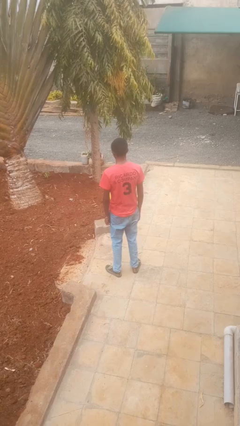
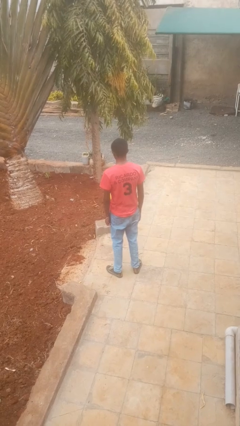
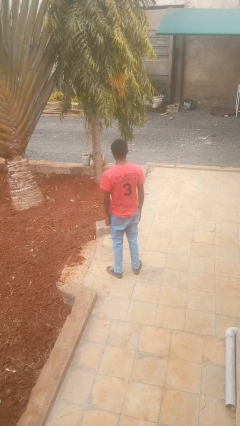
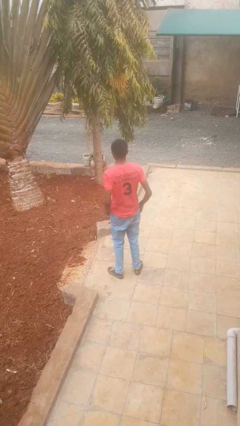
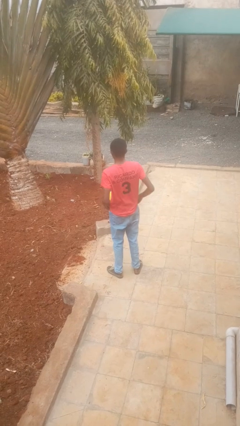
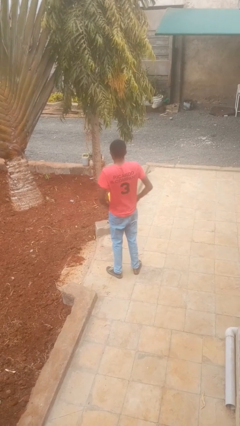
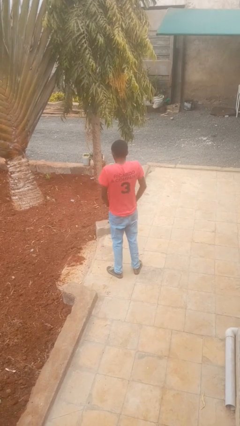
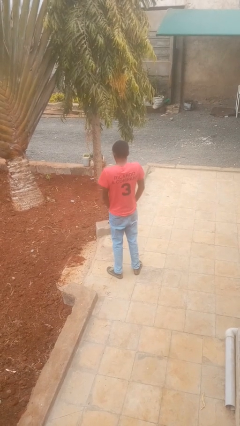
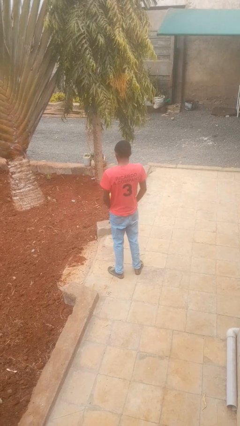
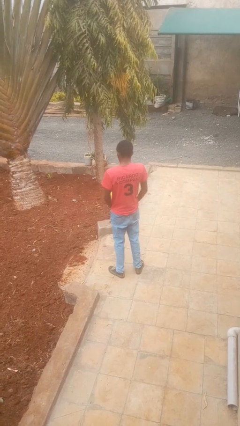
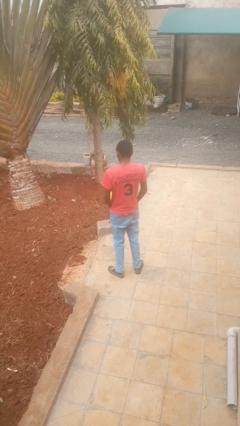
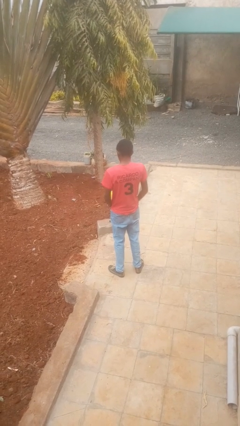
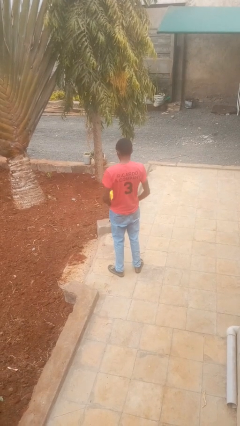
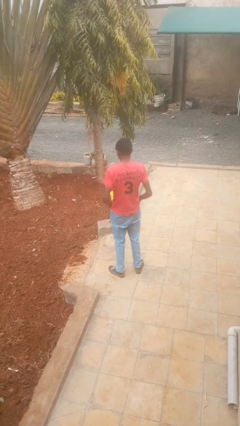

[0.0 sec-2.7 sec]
person puts hands in back pockets

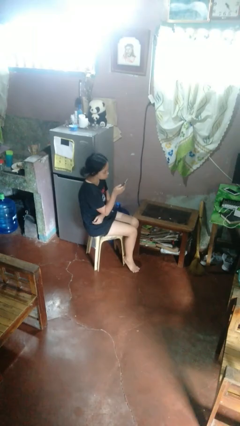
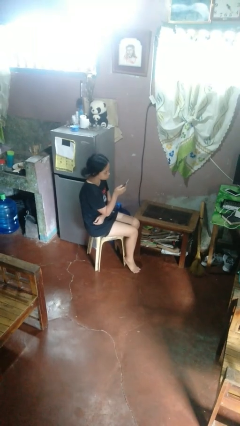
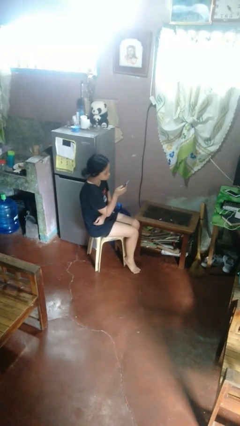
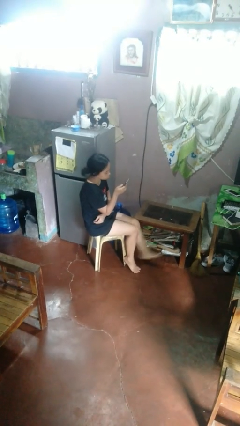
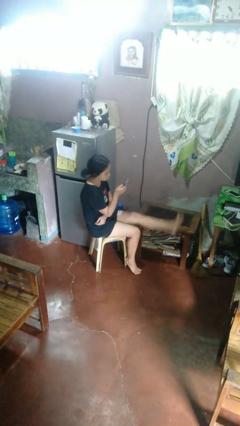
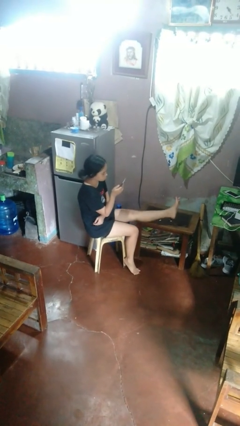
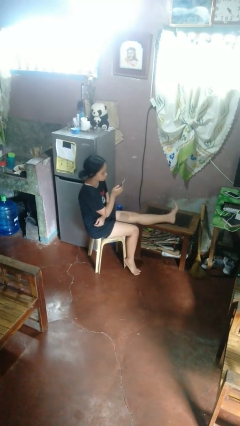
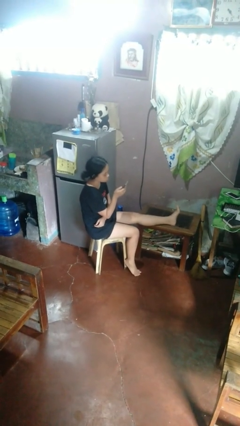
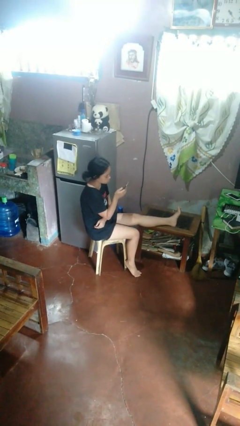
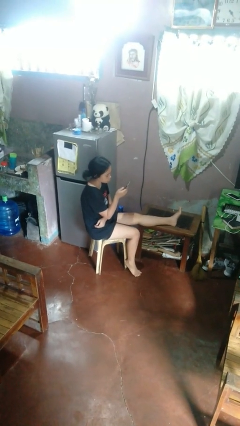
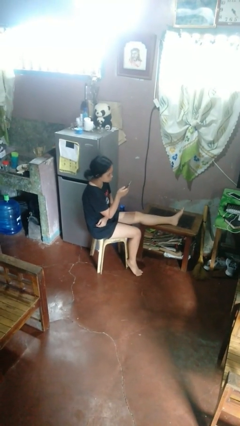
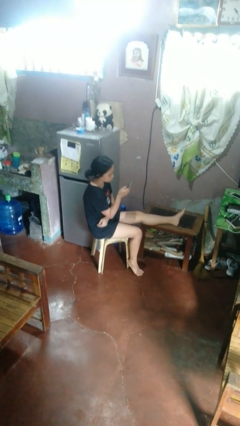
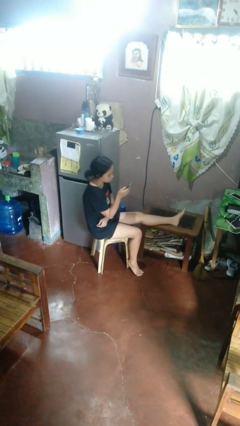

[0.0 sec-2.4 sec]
person puts feet up

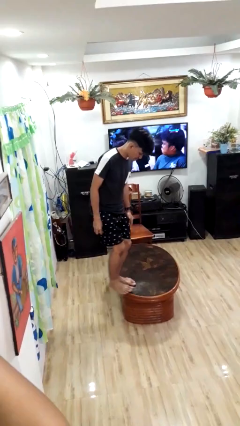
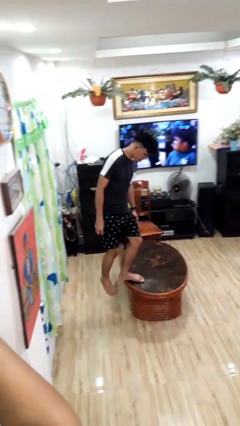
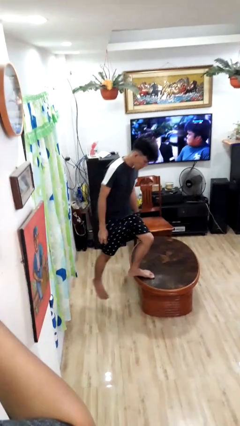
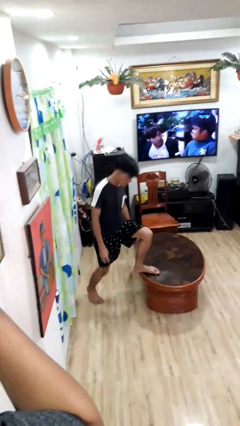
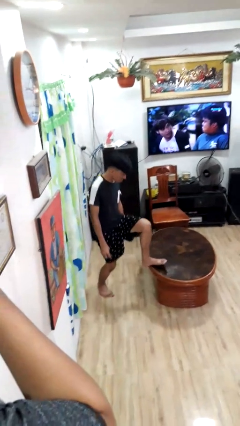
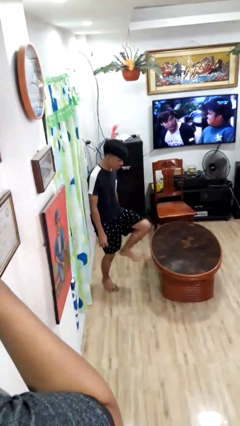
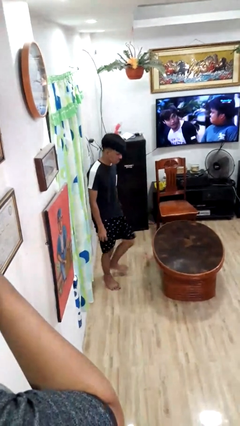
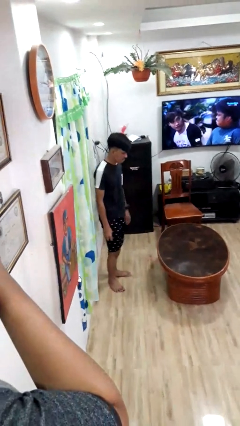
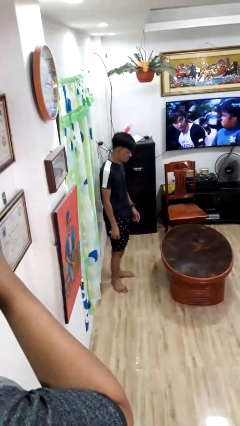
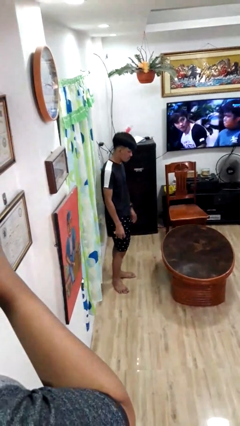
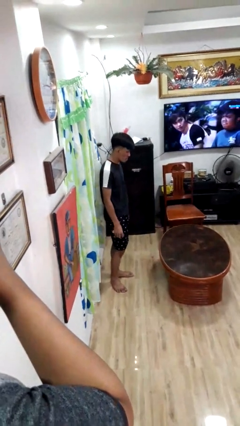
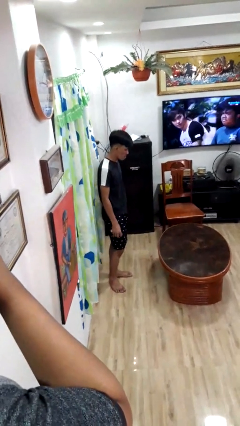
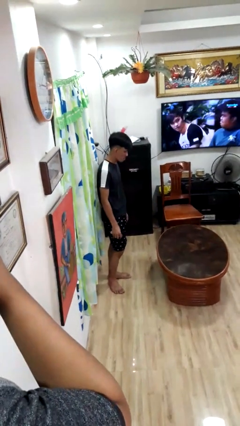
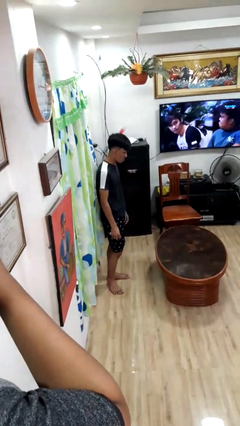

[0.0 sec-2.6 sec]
person climbs off table

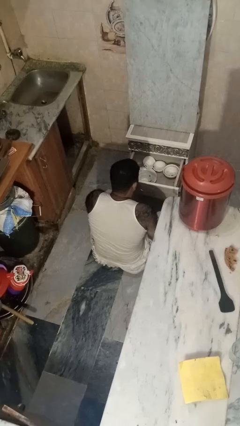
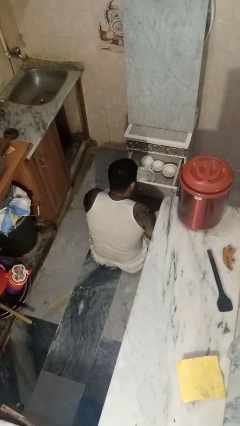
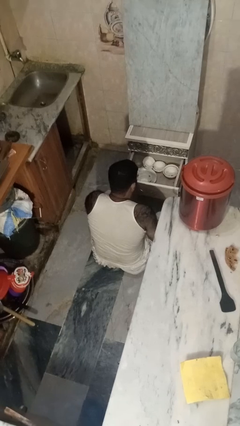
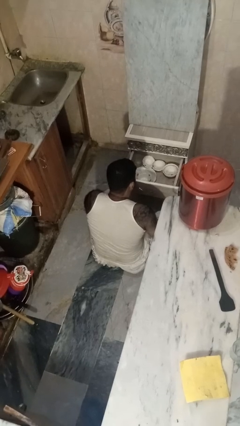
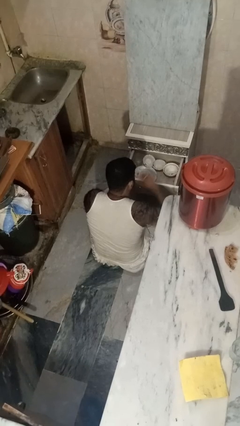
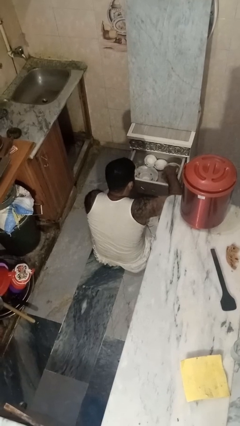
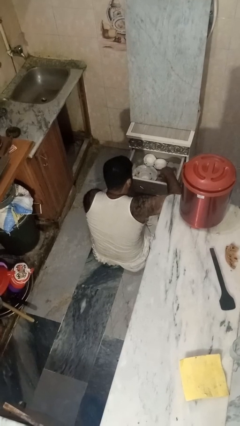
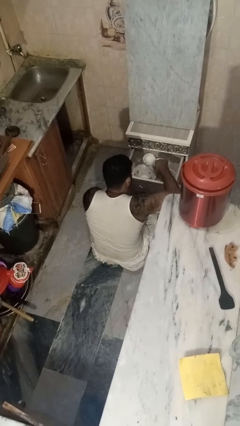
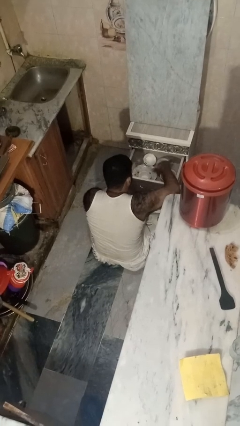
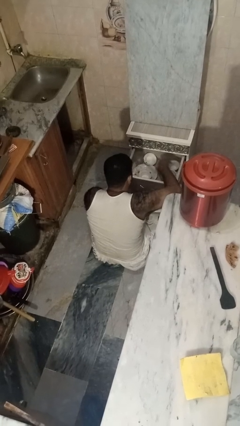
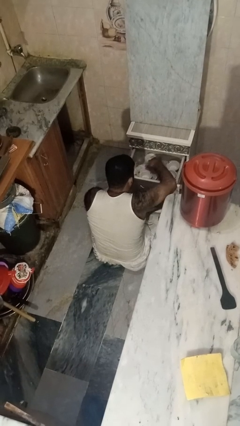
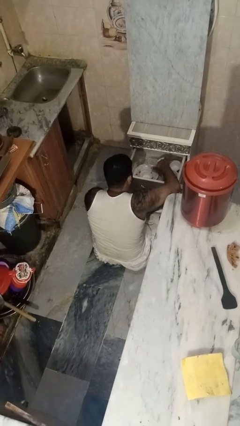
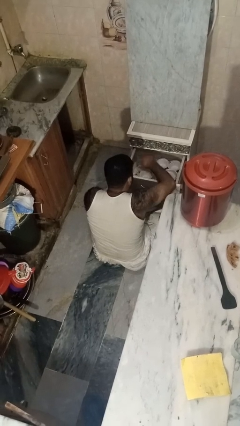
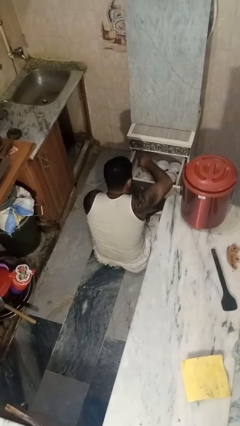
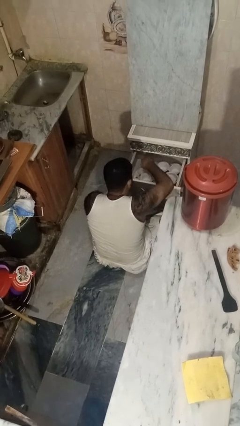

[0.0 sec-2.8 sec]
person searches in kitchen drawer

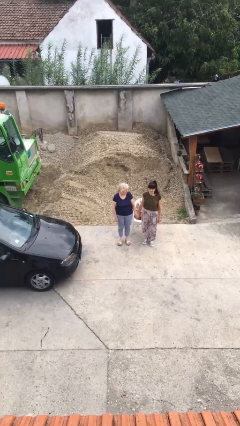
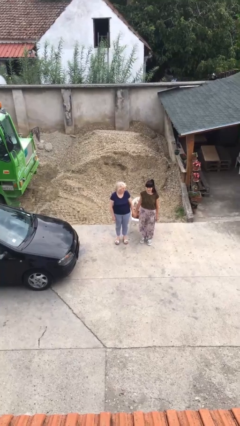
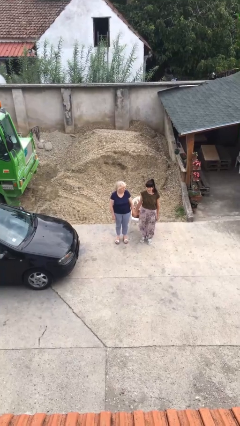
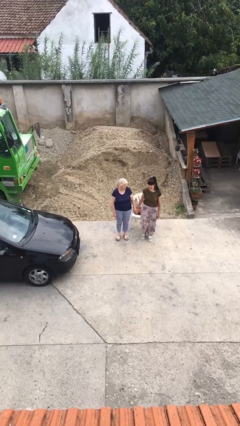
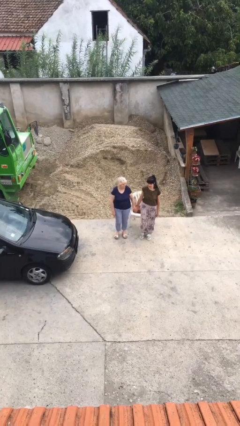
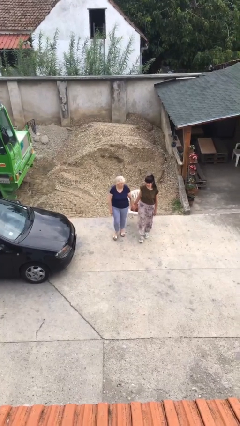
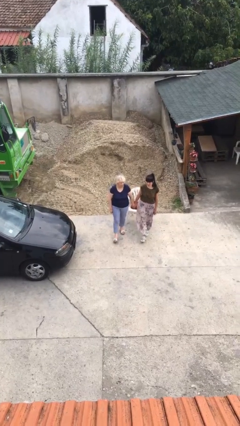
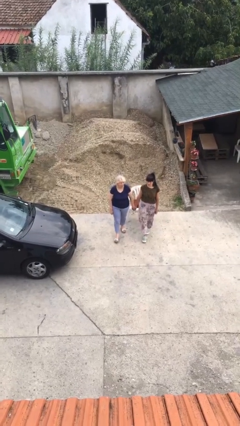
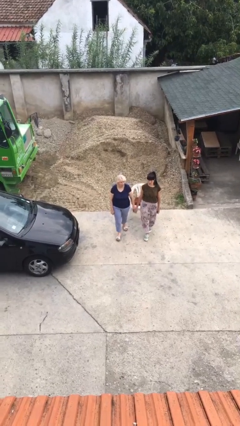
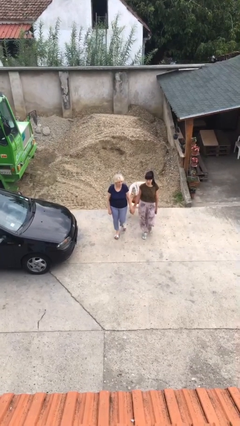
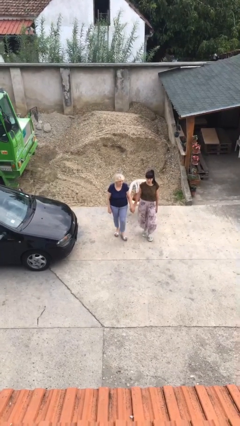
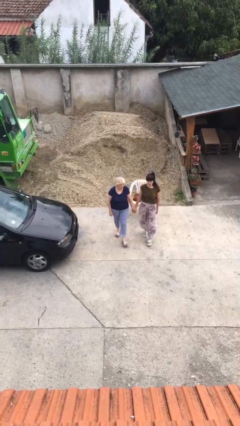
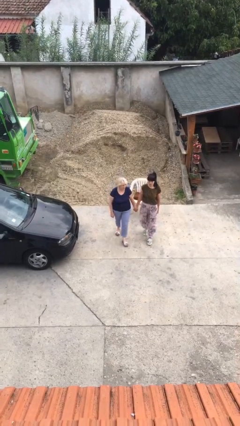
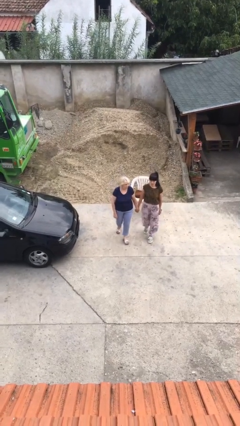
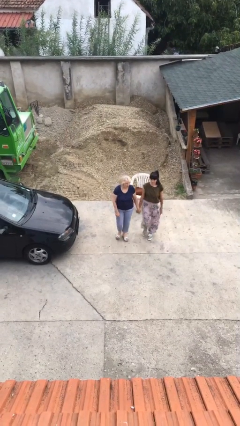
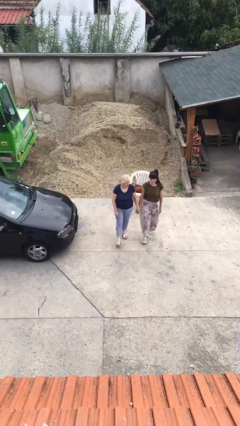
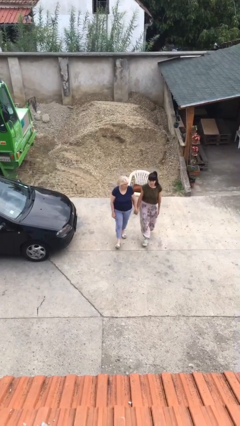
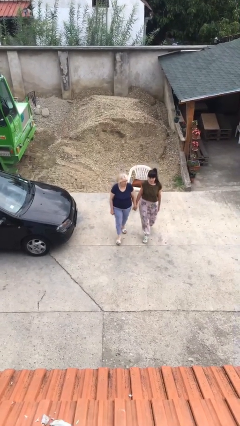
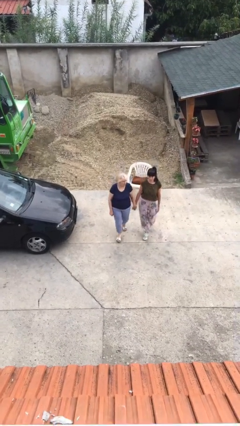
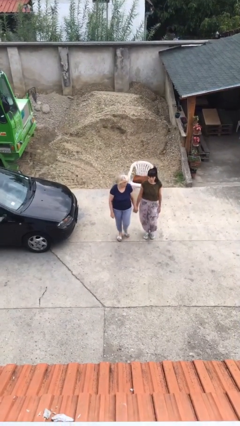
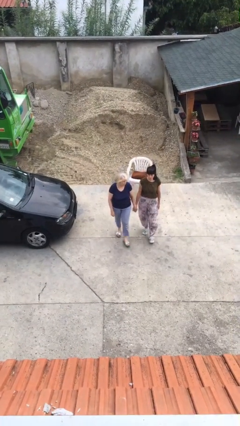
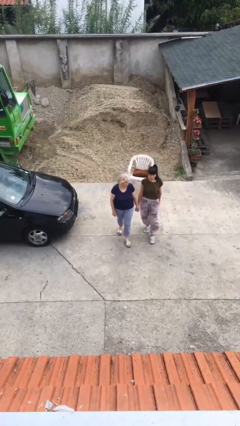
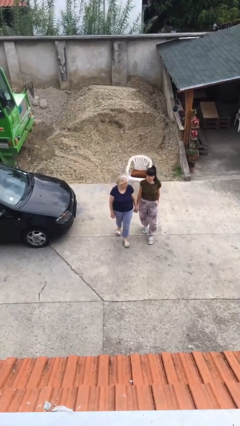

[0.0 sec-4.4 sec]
person holds hand

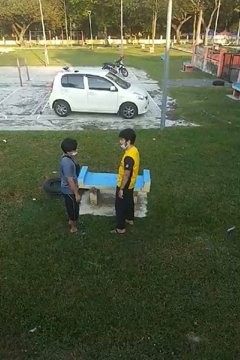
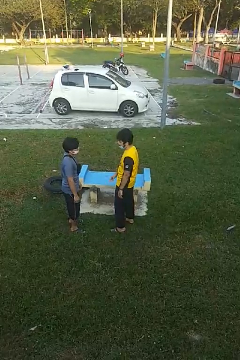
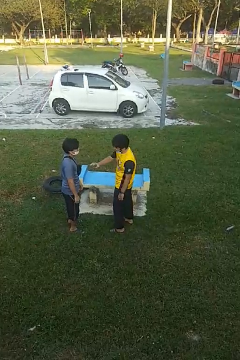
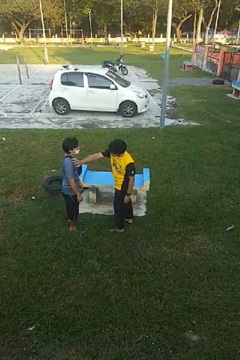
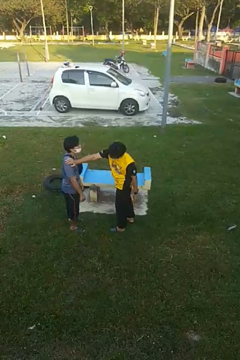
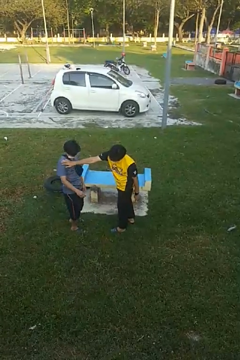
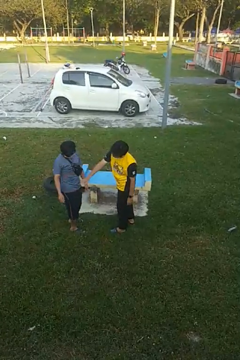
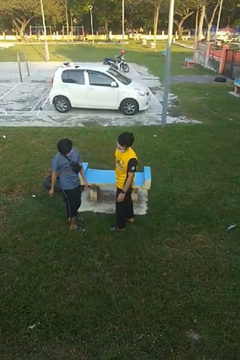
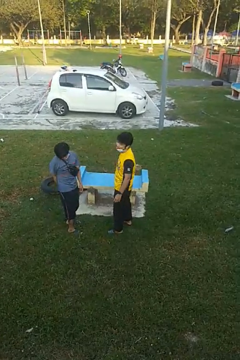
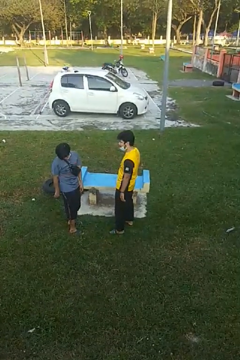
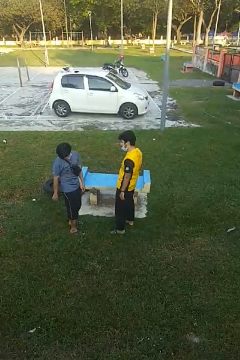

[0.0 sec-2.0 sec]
person shoves person

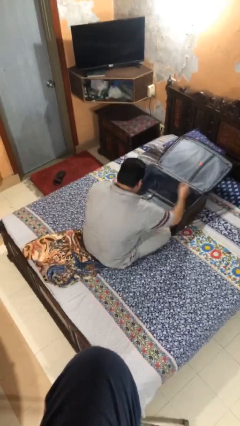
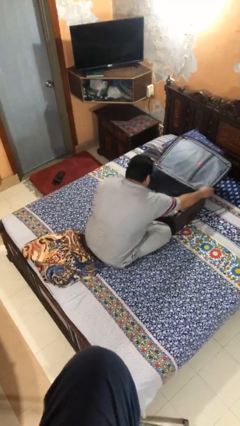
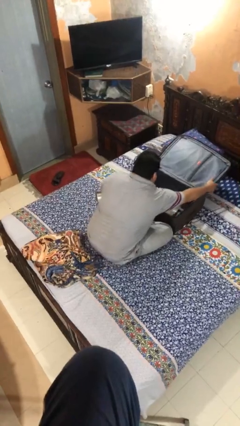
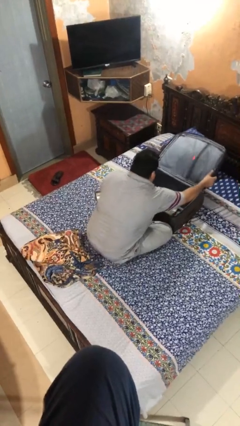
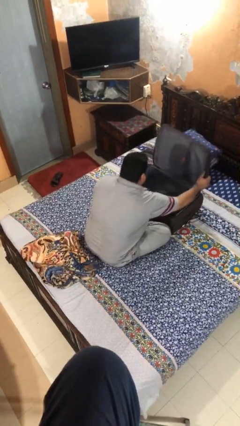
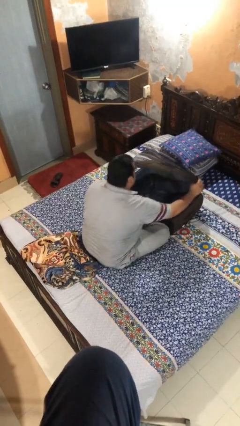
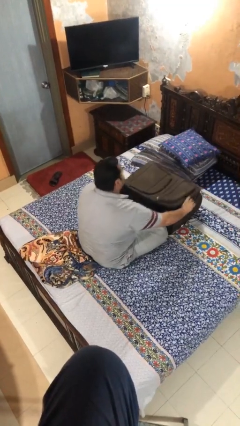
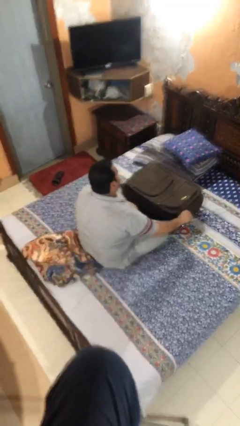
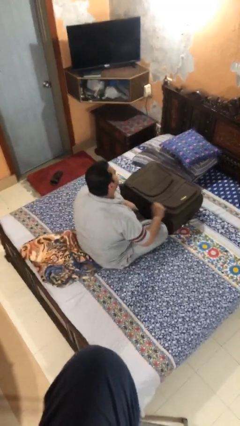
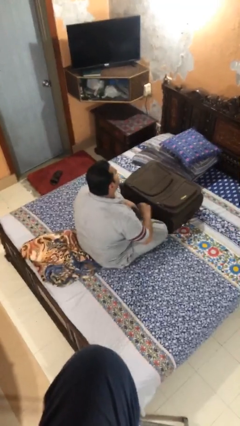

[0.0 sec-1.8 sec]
person closes suitcase
